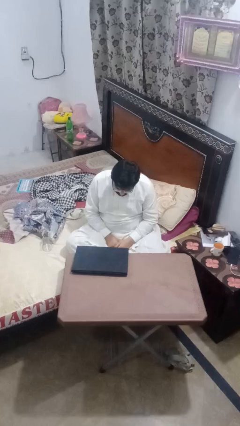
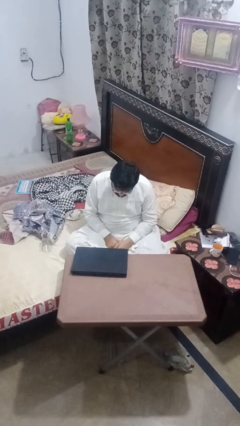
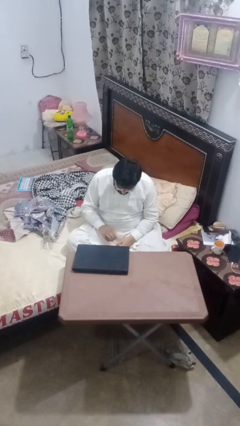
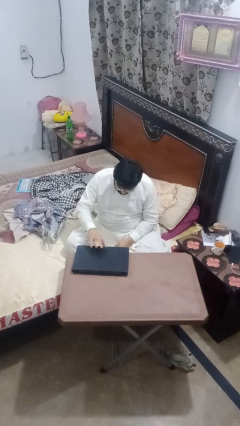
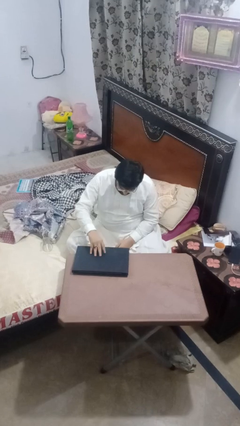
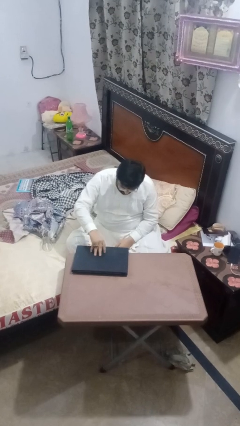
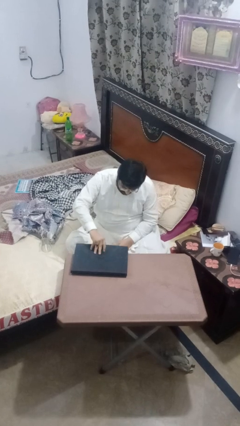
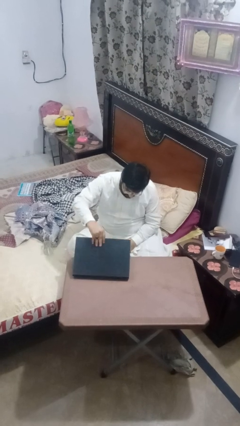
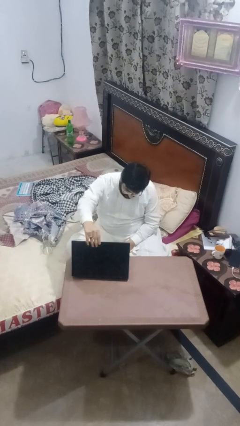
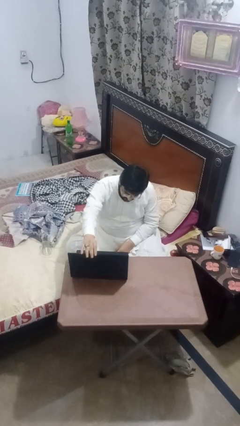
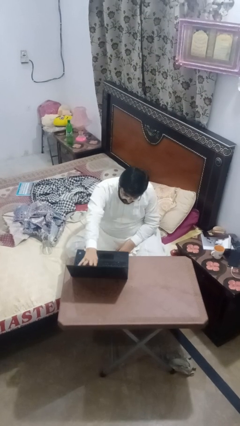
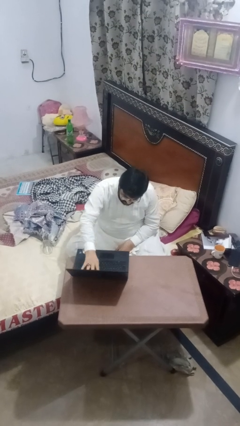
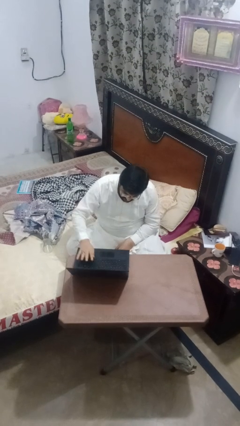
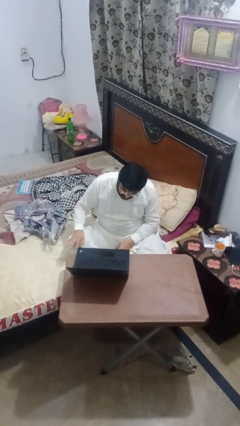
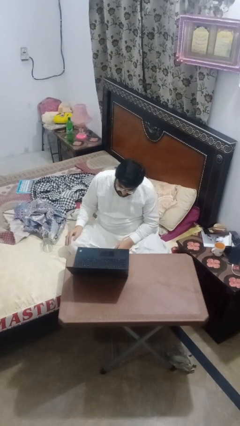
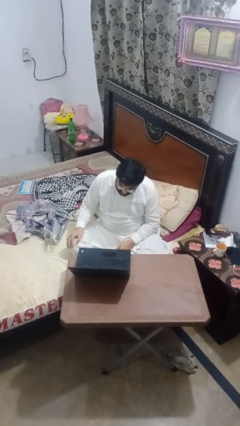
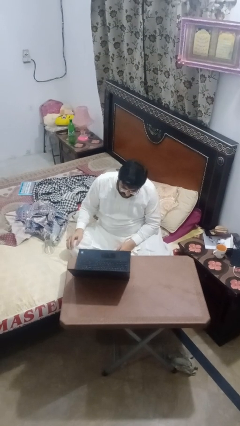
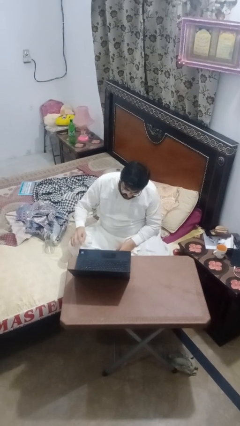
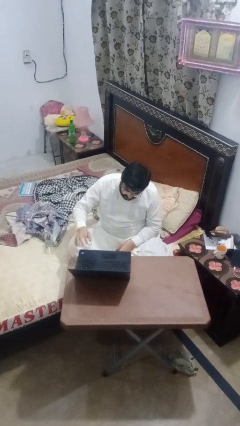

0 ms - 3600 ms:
person opens laptop

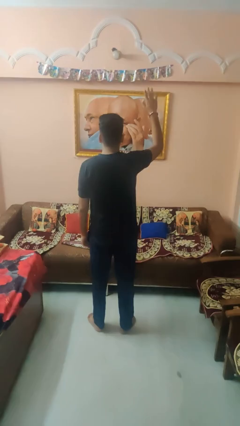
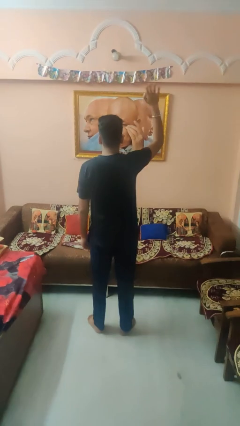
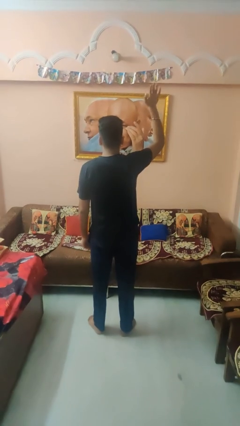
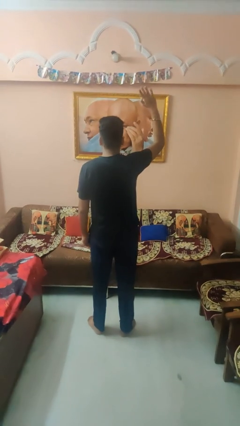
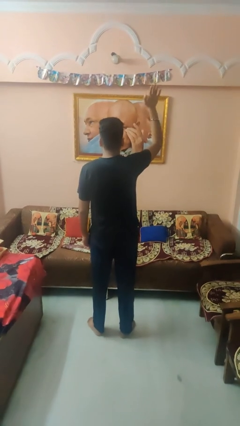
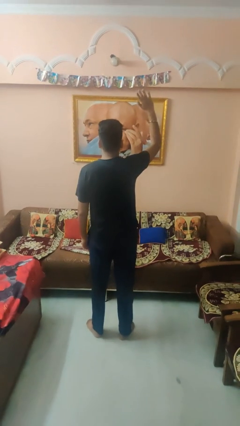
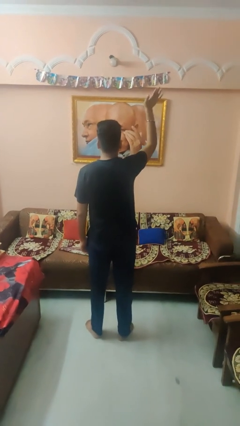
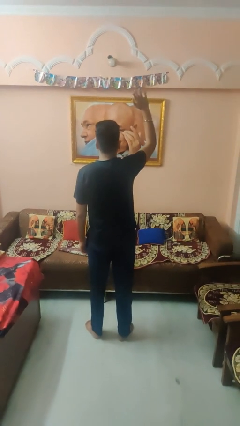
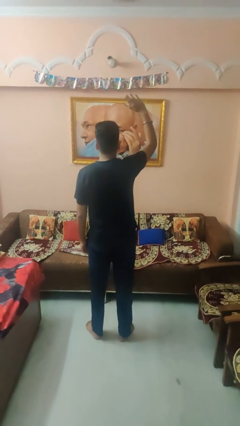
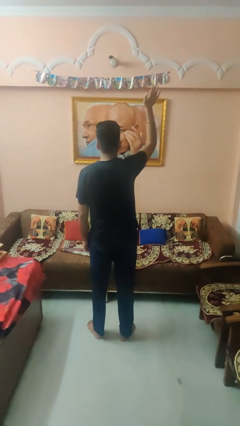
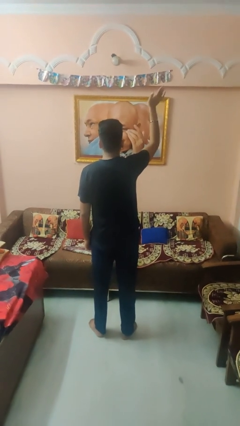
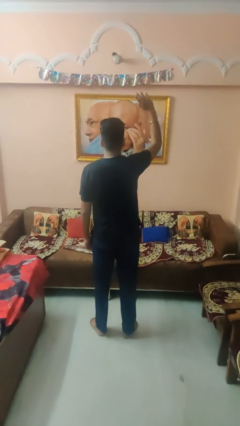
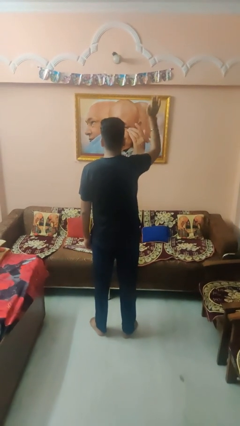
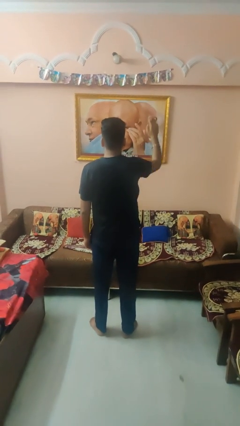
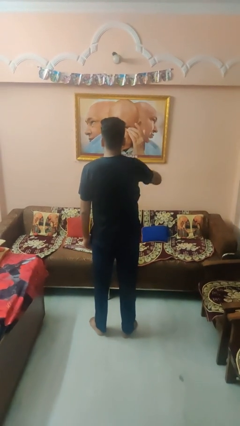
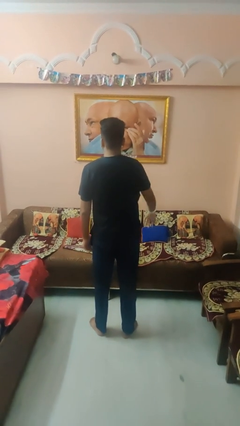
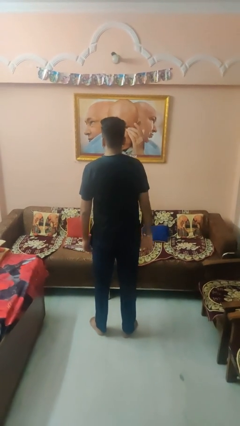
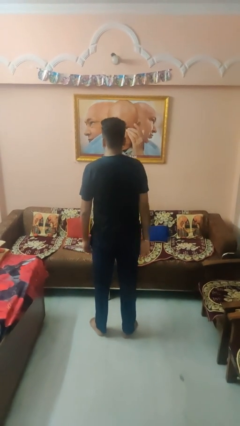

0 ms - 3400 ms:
person waves at person

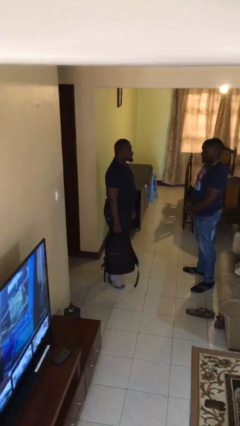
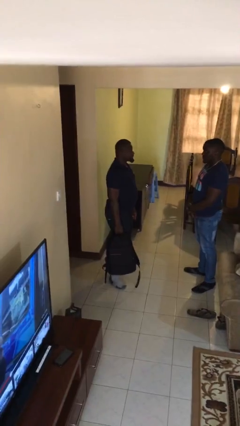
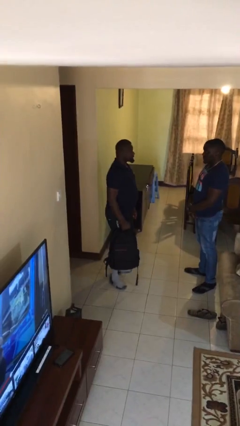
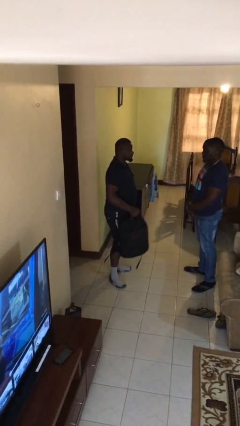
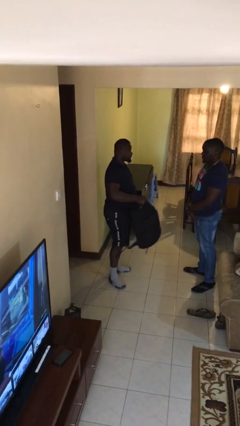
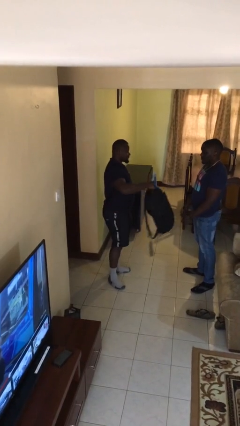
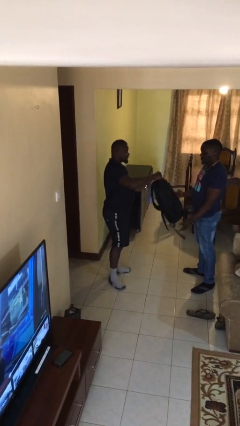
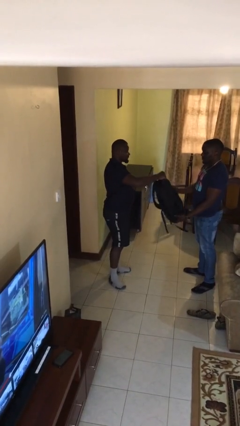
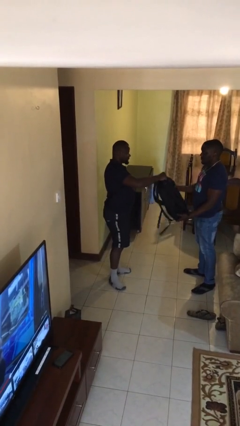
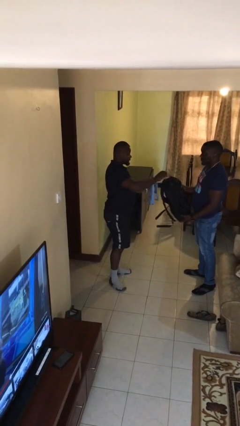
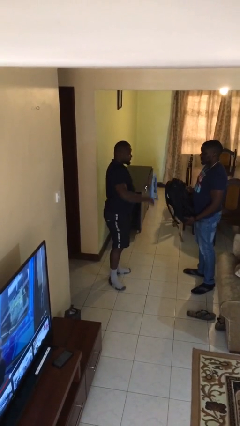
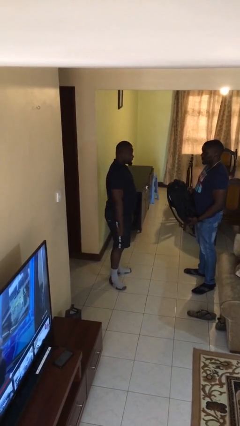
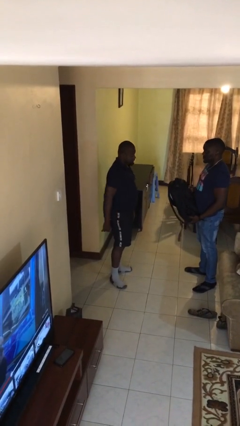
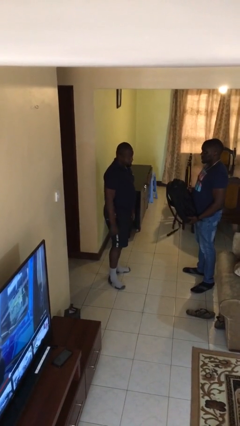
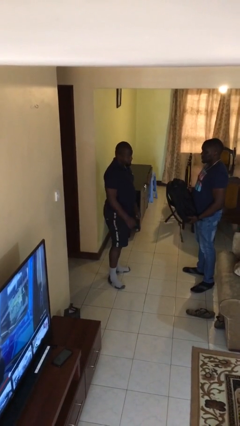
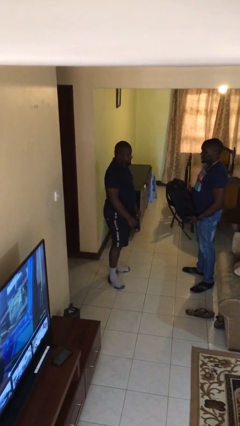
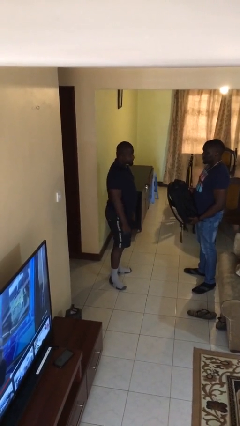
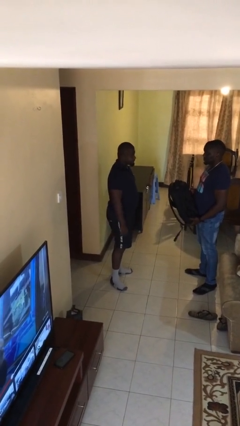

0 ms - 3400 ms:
person transfers object to person

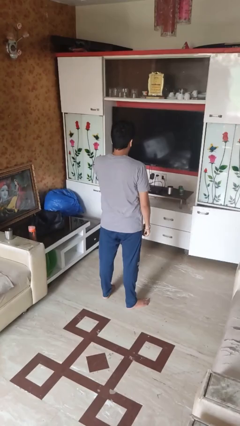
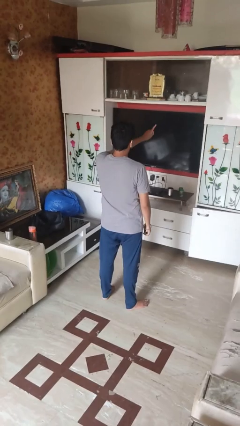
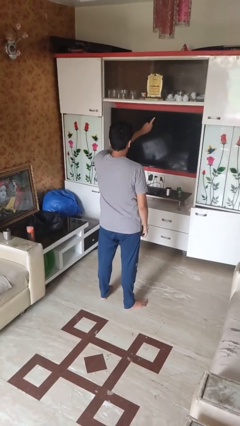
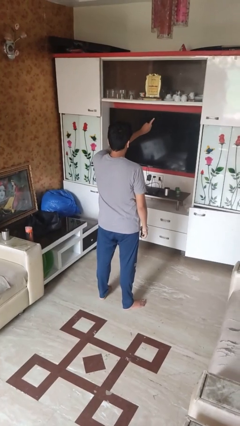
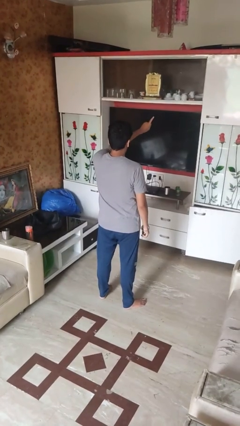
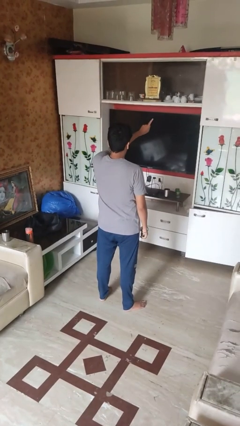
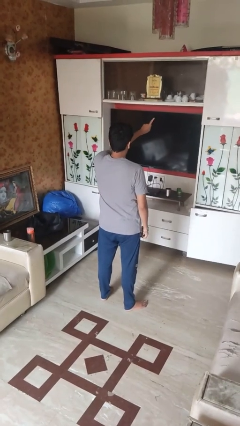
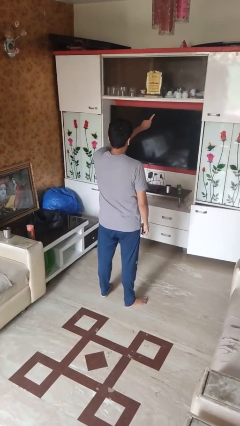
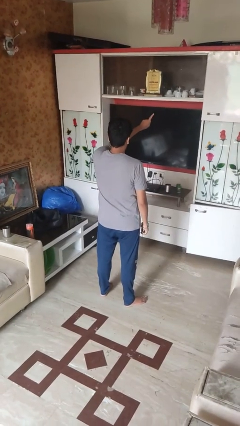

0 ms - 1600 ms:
person gestures number one

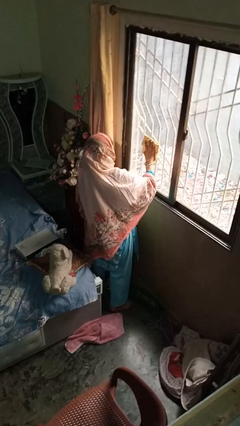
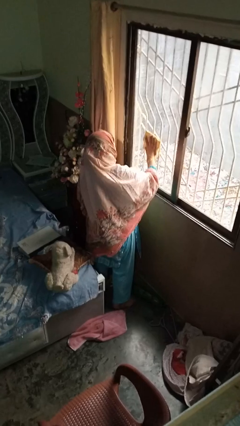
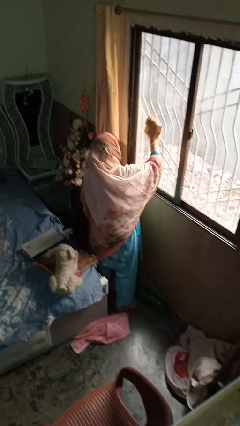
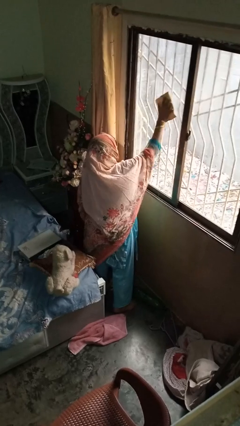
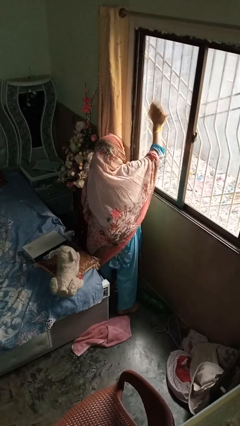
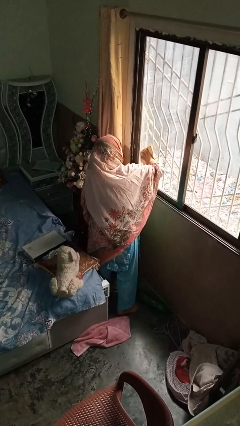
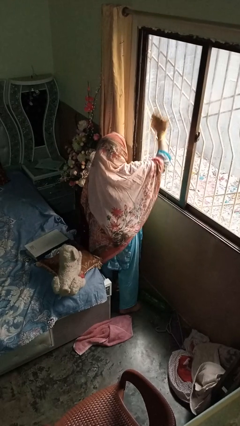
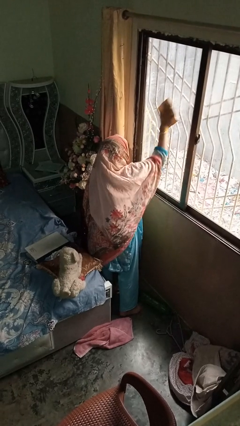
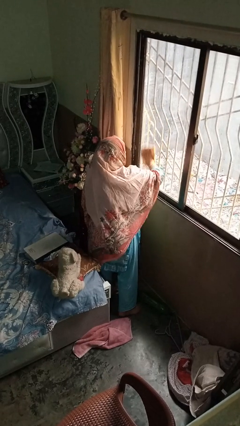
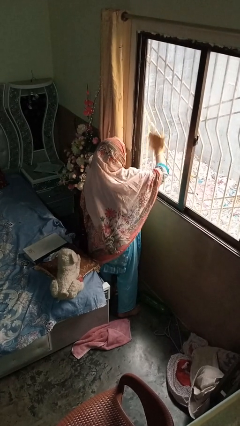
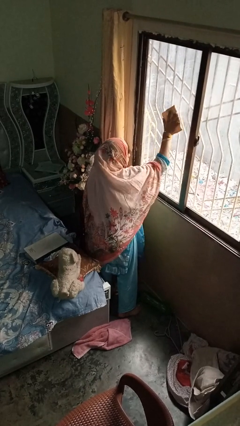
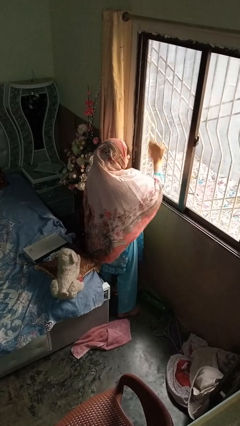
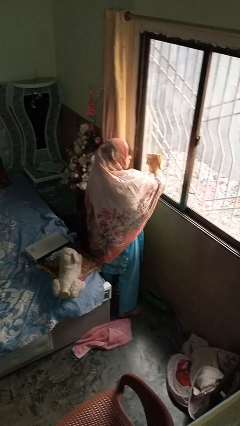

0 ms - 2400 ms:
person washes window

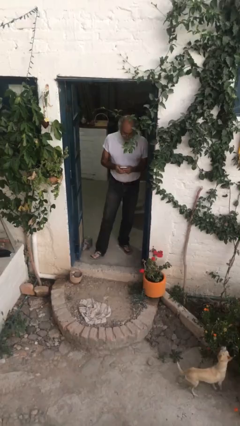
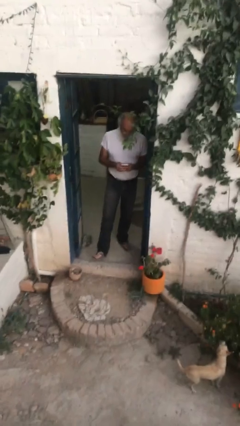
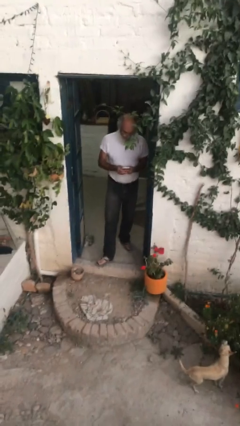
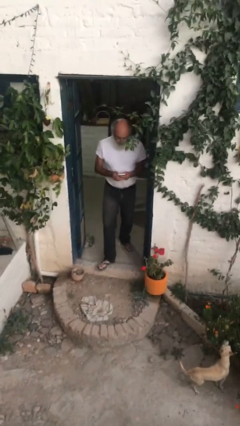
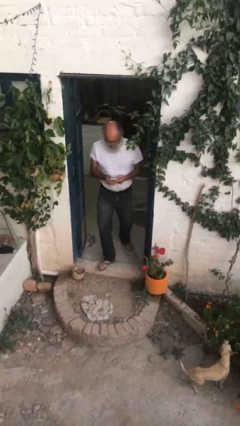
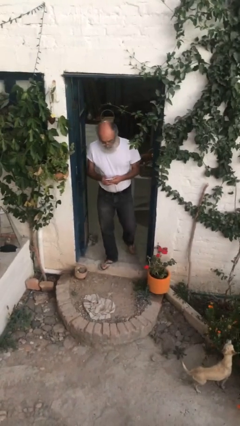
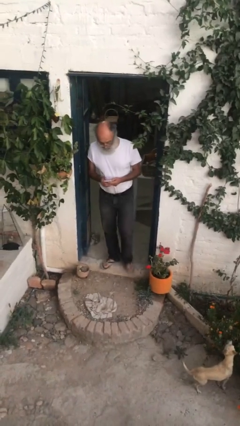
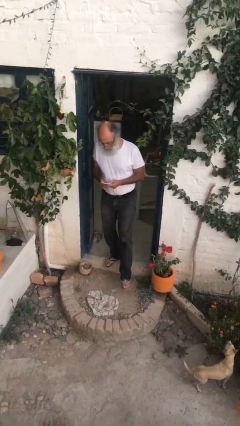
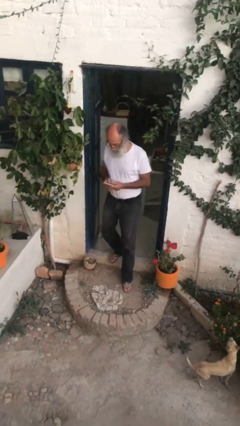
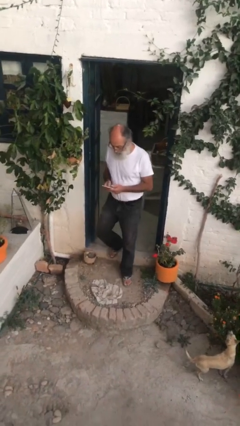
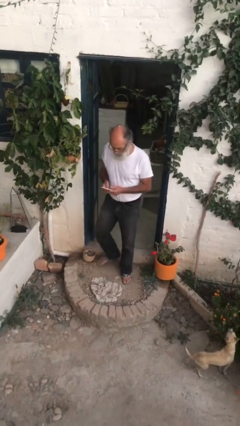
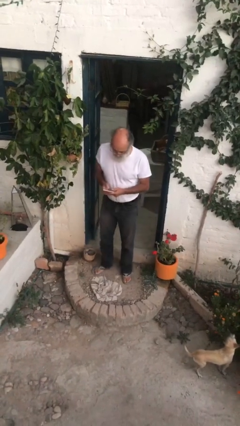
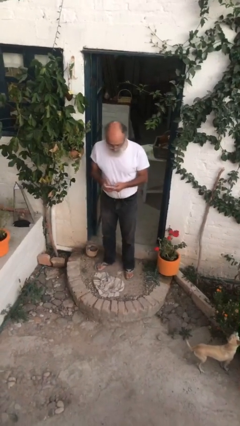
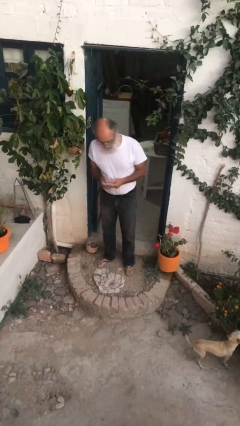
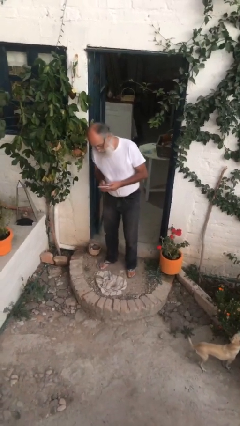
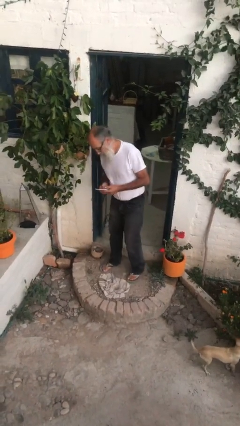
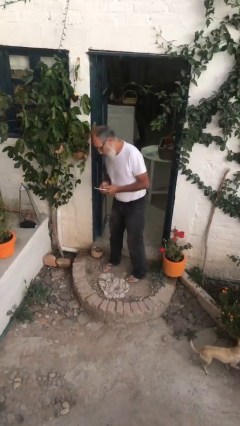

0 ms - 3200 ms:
person enters scene through structure
